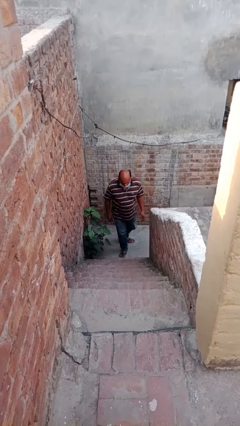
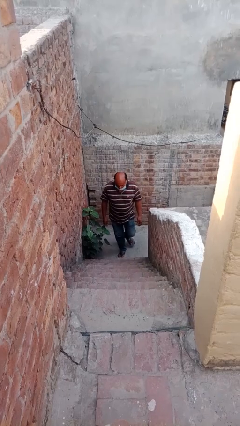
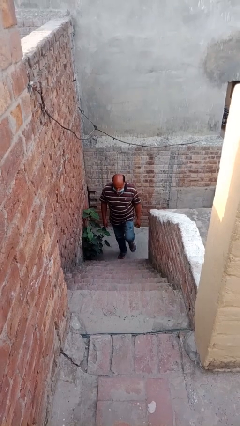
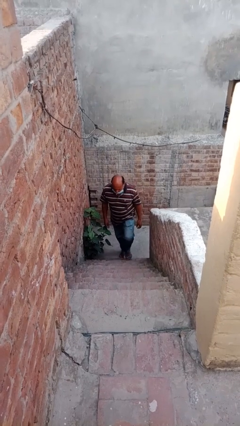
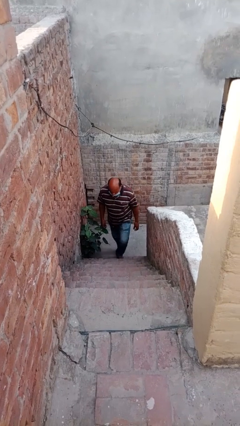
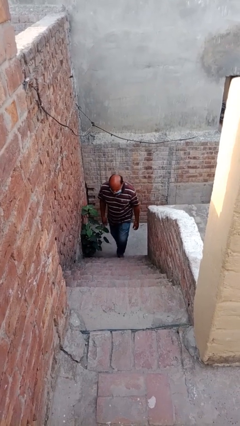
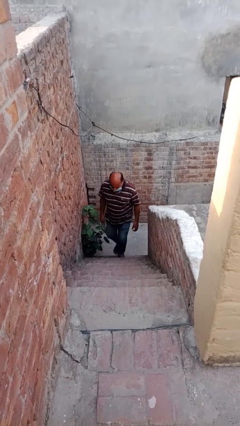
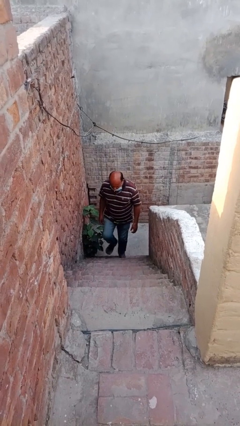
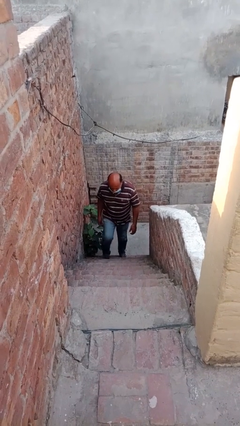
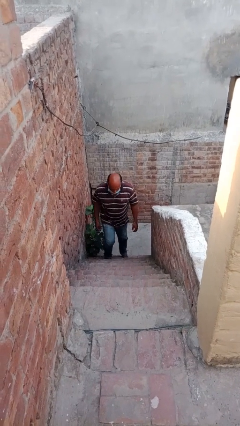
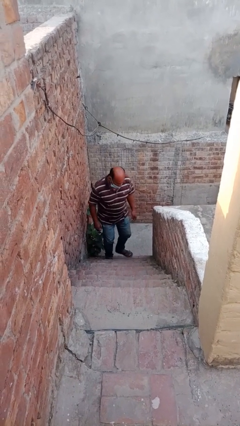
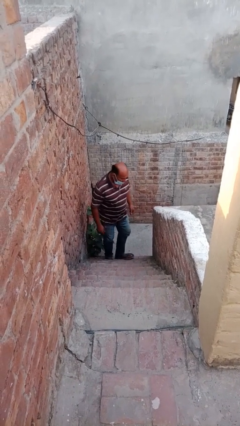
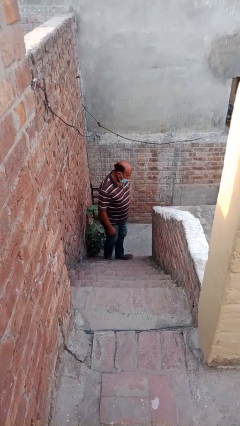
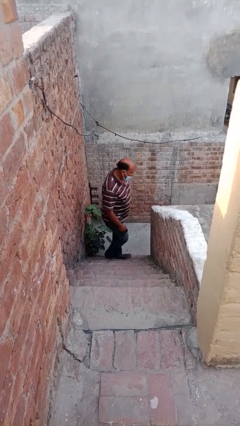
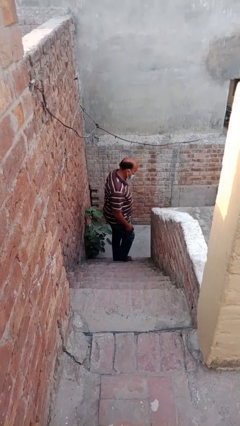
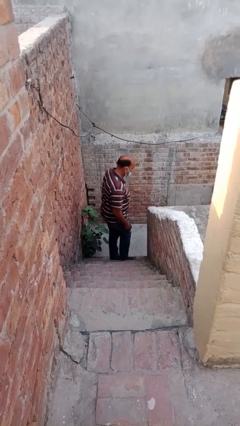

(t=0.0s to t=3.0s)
person climbs up stairs

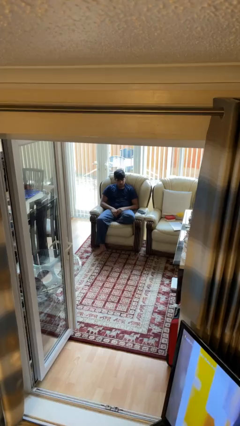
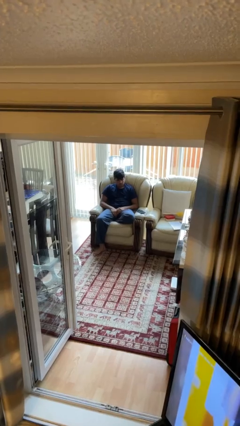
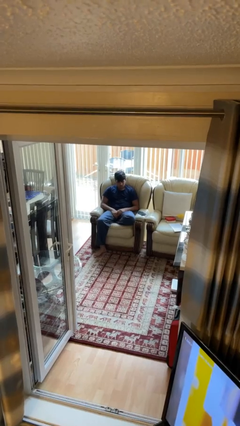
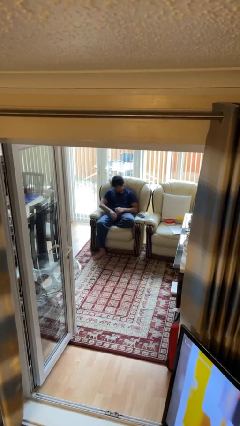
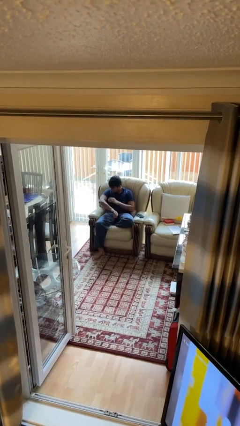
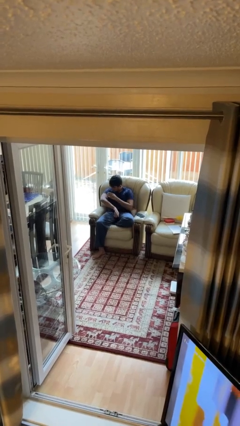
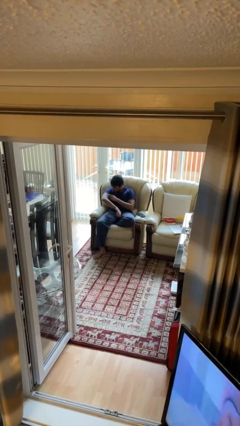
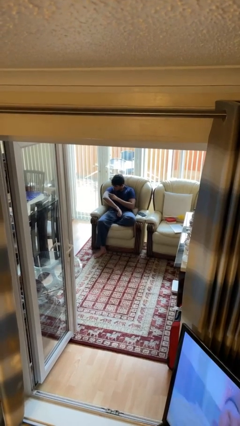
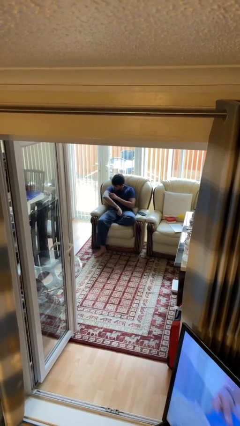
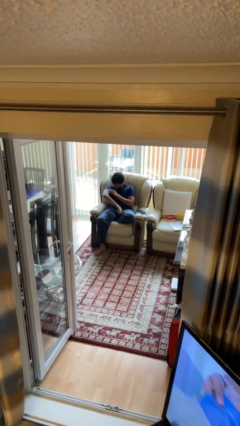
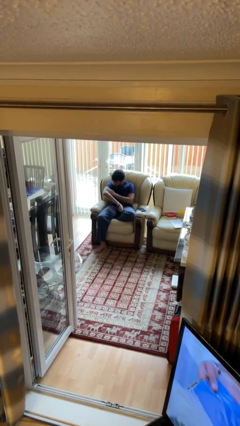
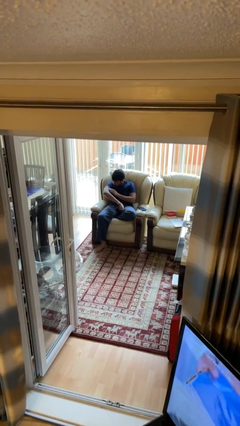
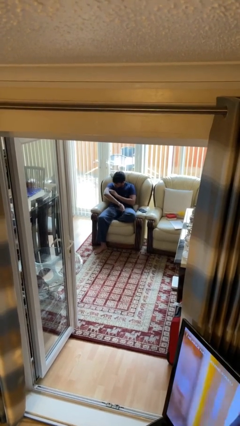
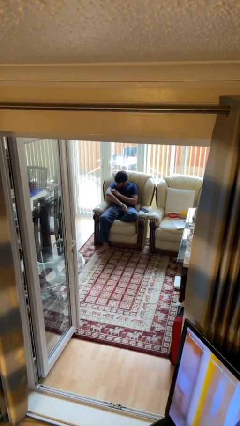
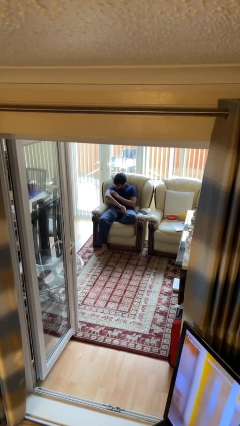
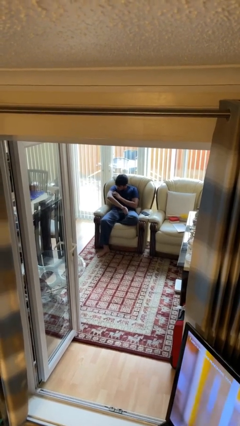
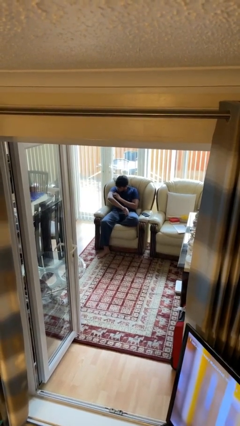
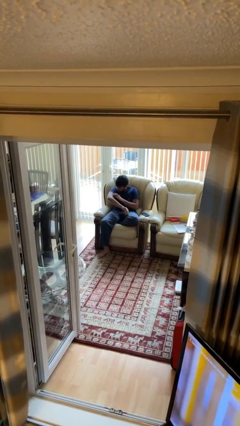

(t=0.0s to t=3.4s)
person swats bug

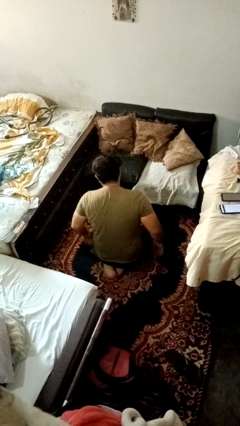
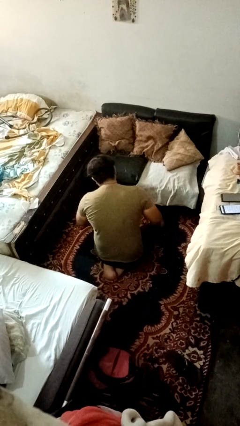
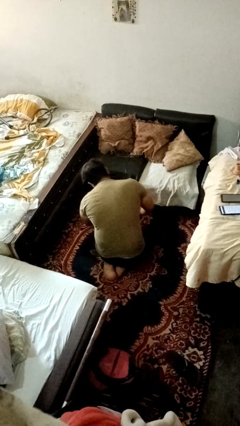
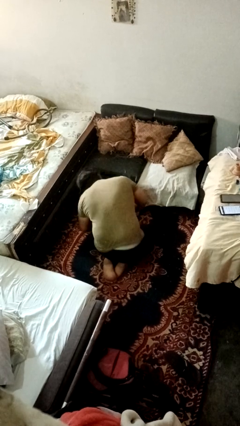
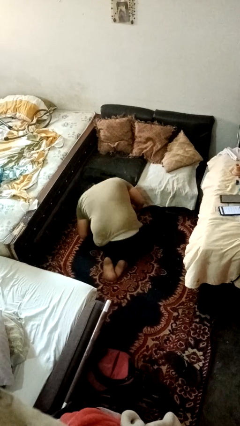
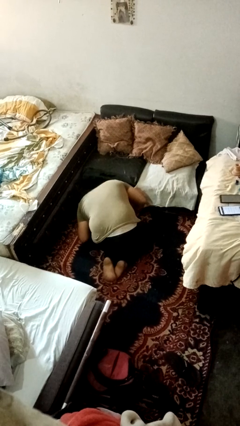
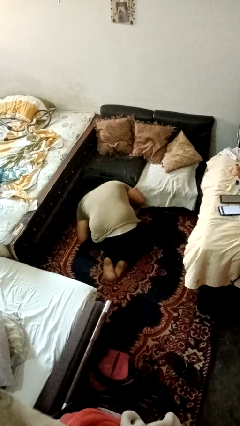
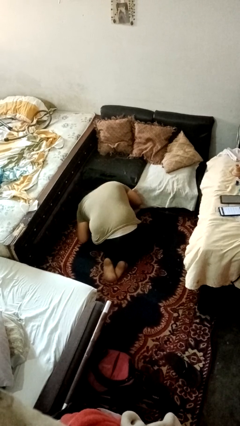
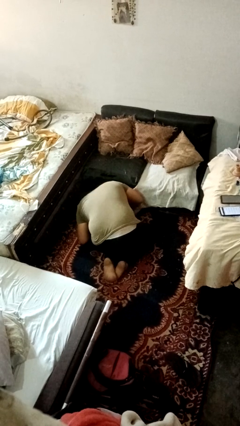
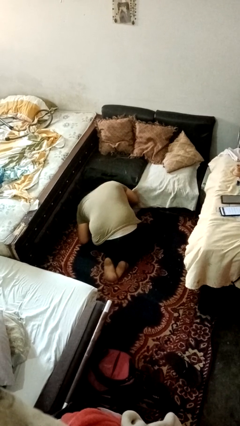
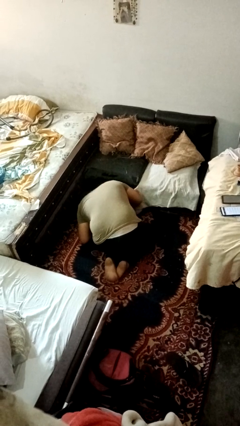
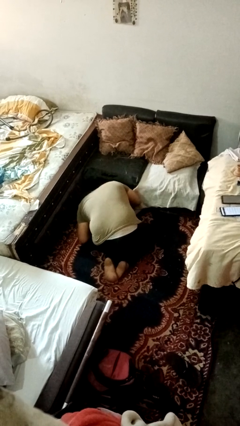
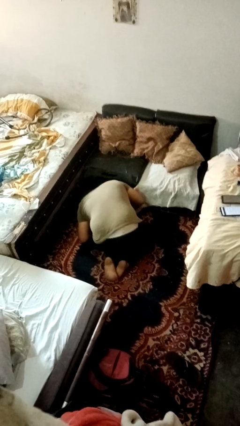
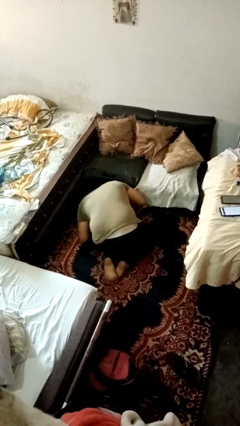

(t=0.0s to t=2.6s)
person searches under couch

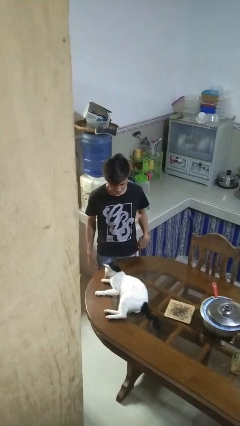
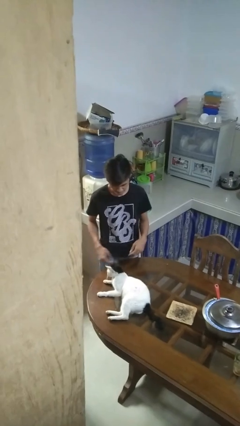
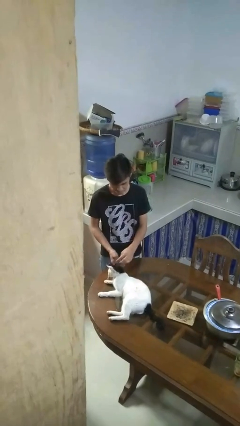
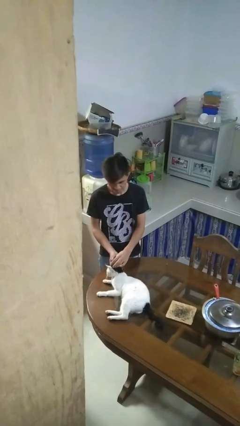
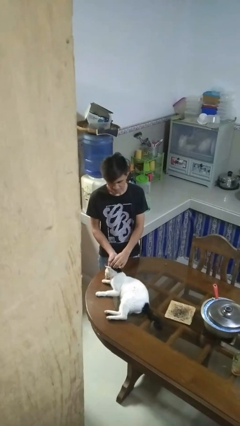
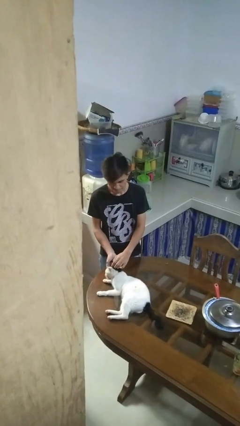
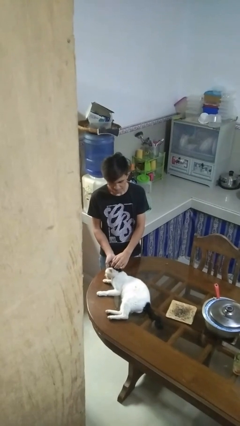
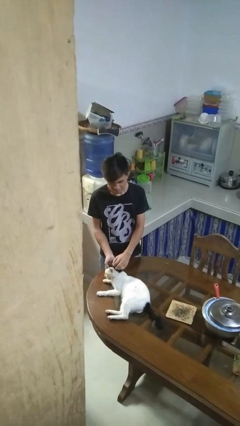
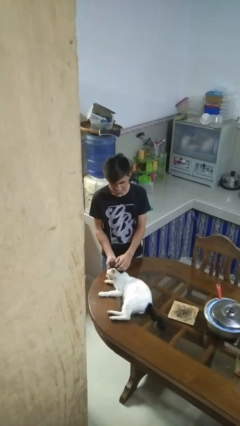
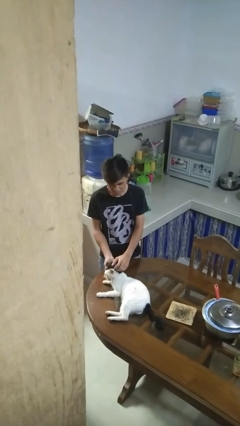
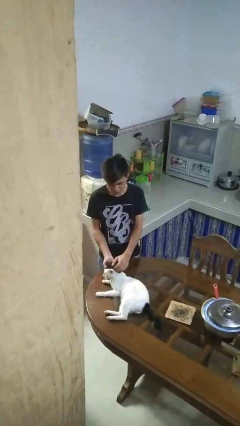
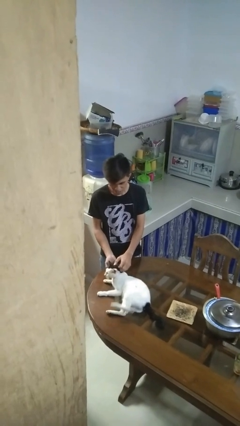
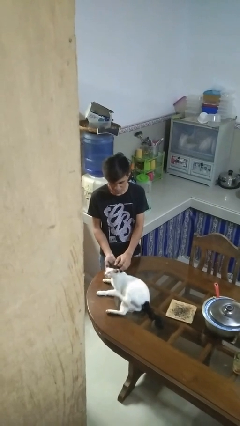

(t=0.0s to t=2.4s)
person pets cat

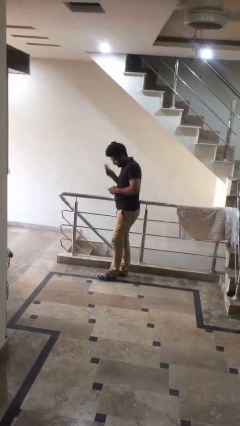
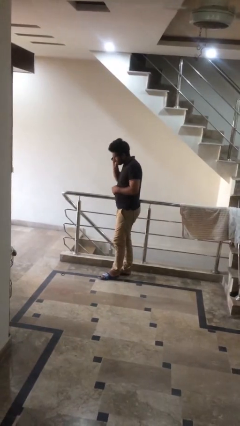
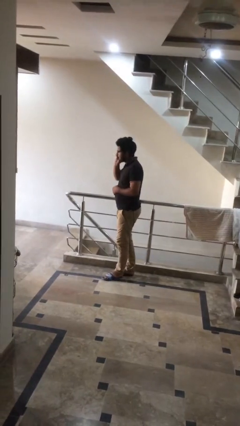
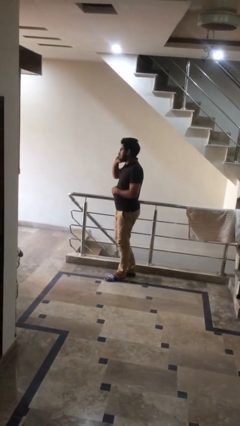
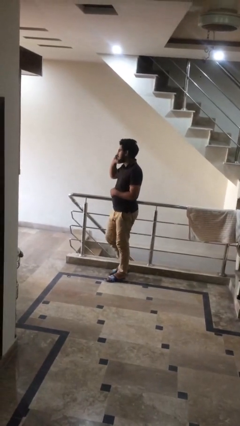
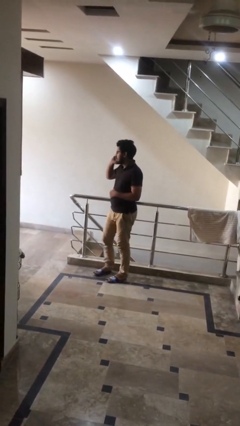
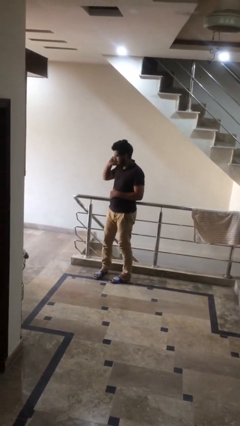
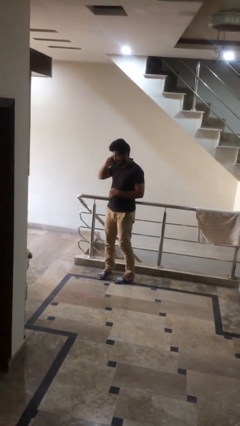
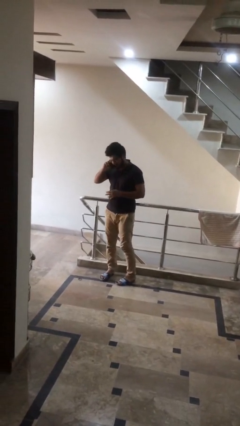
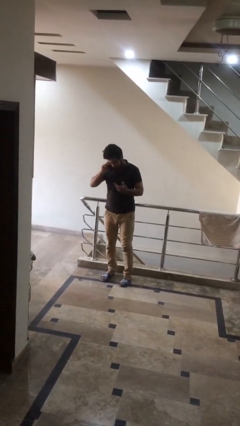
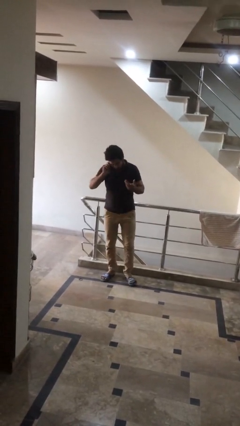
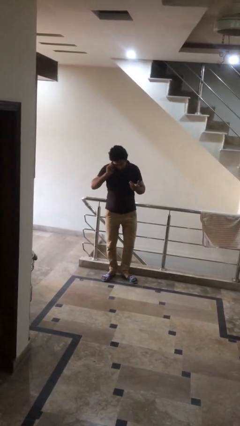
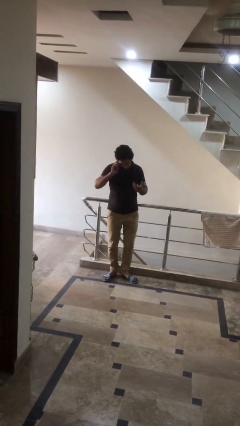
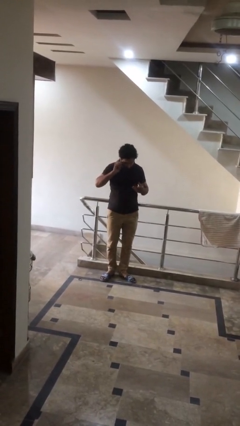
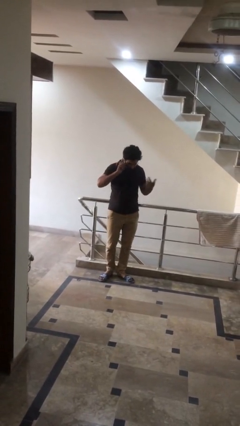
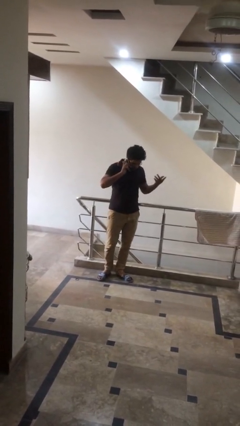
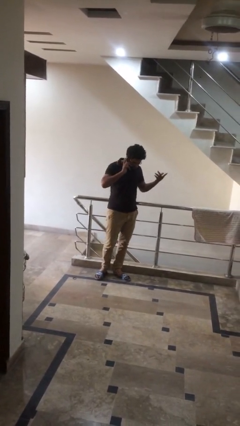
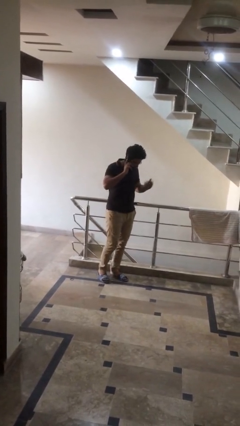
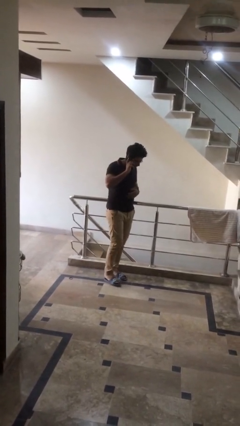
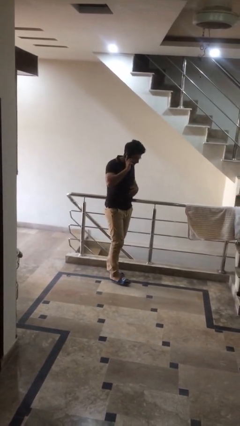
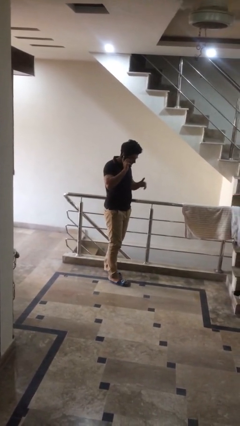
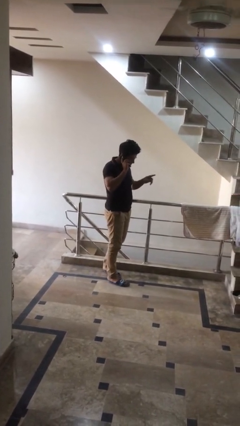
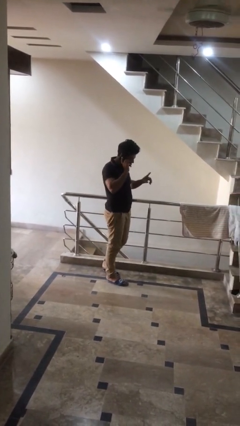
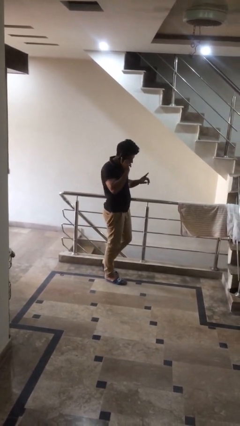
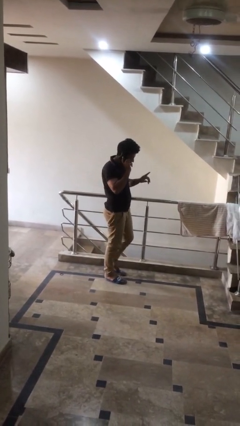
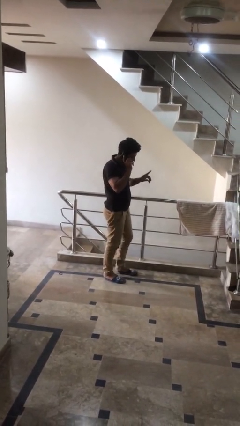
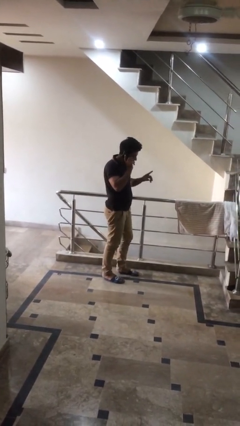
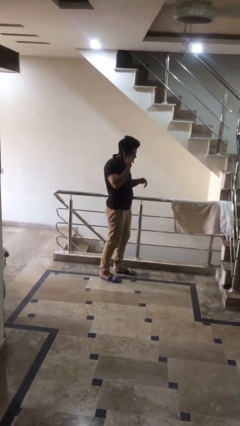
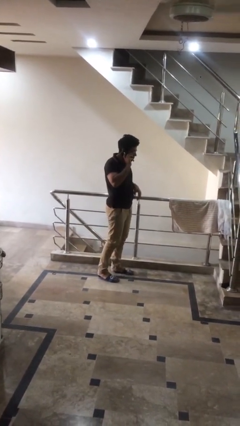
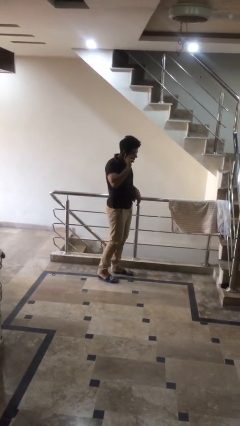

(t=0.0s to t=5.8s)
person talks on phone

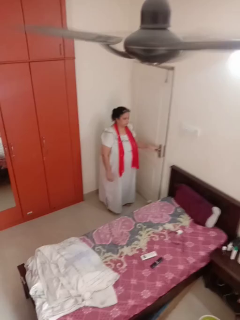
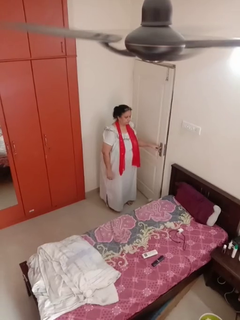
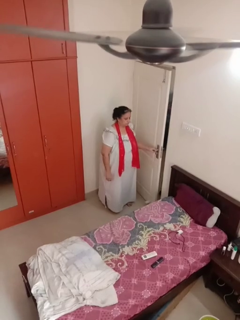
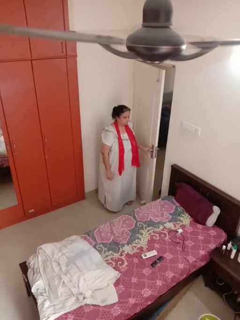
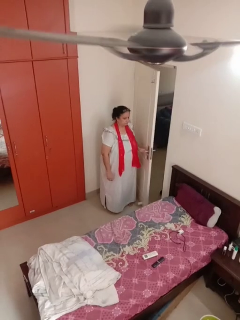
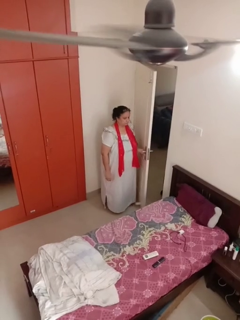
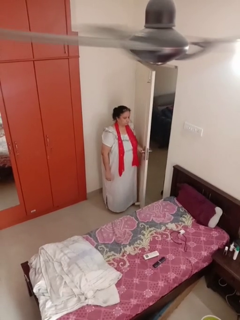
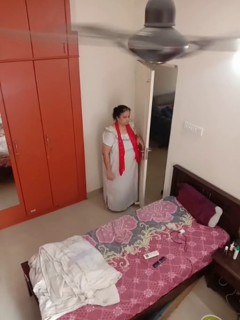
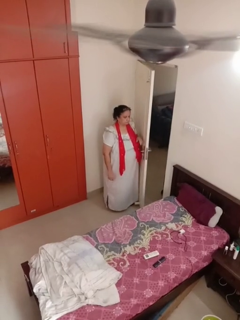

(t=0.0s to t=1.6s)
person opens facility door
